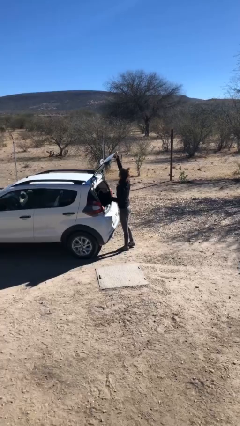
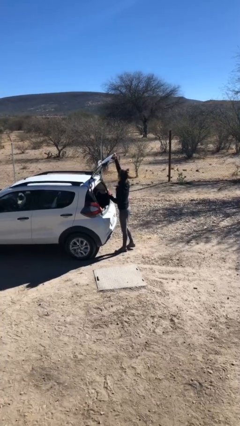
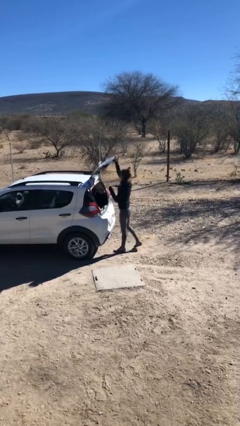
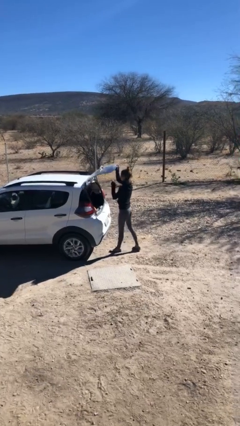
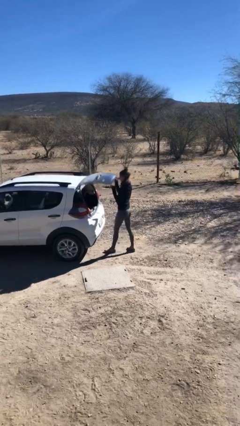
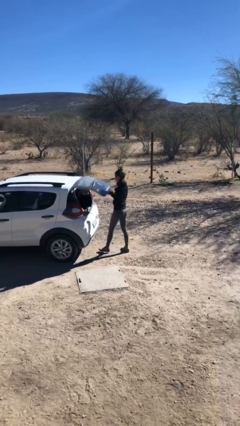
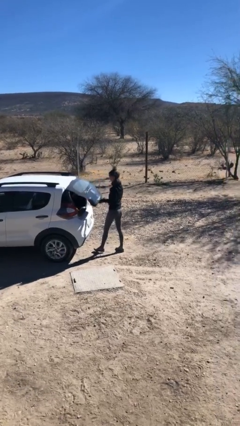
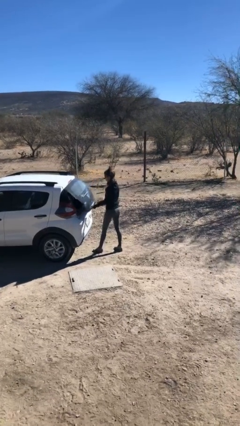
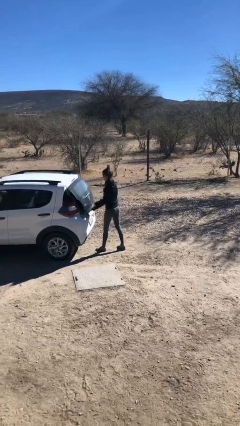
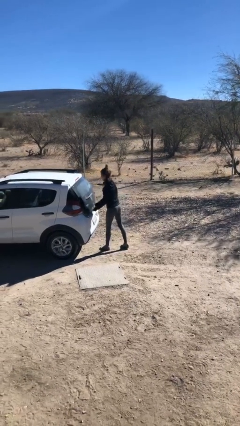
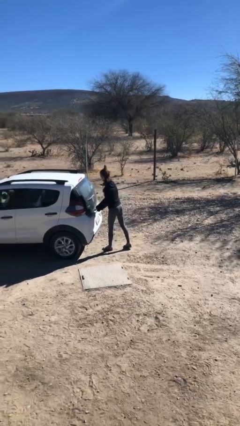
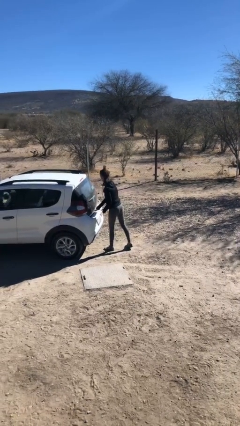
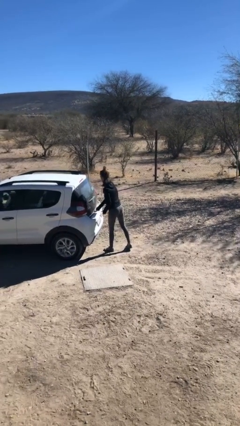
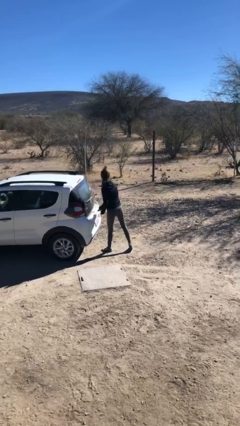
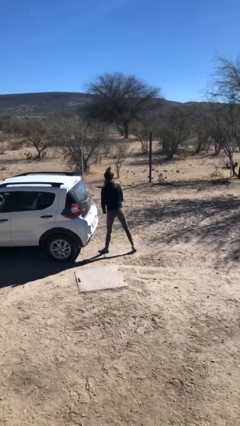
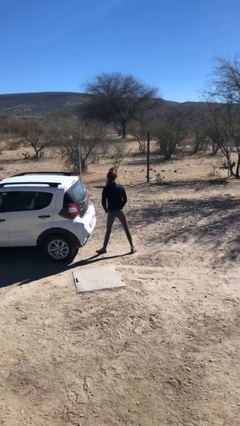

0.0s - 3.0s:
person closes car trunk

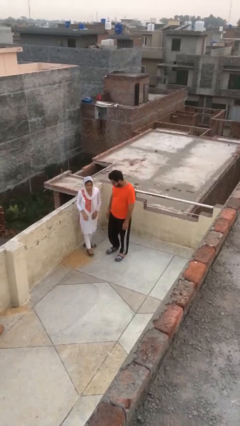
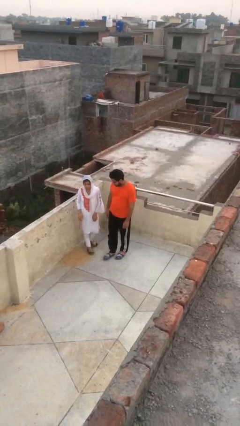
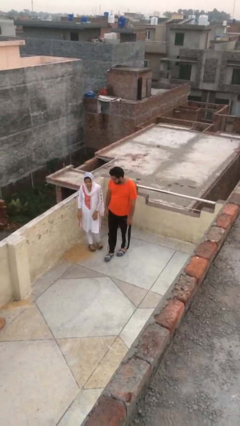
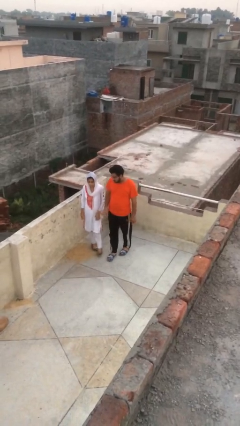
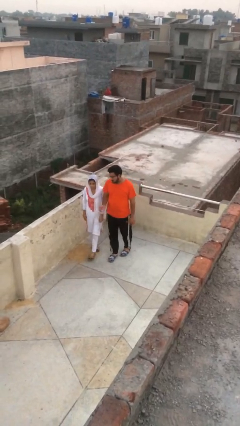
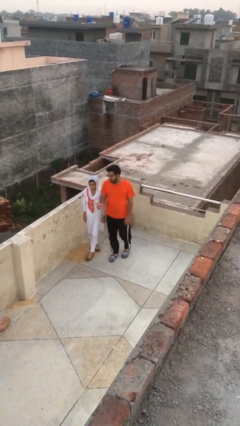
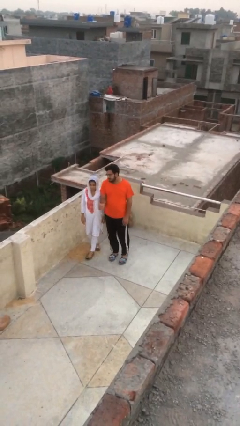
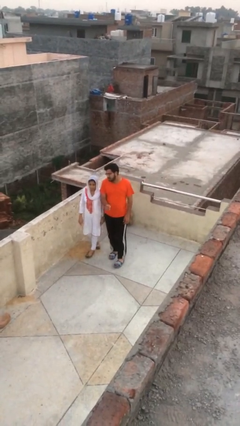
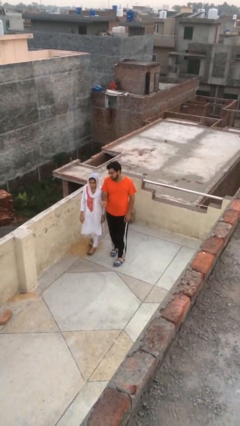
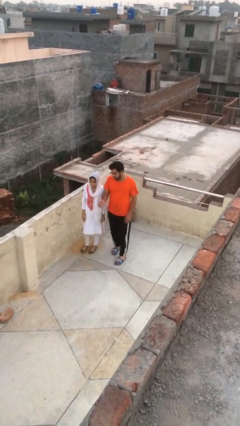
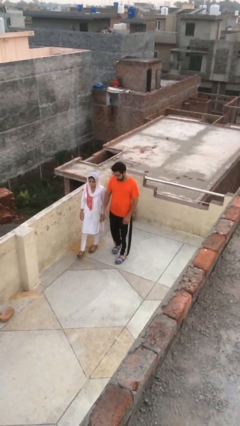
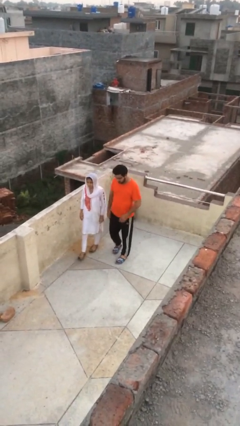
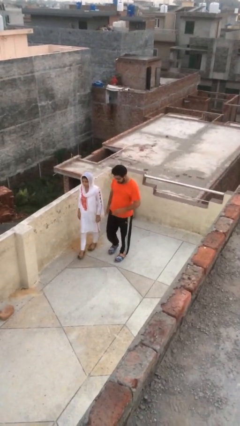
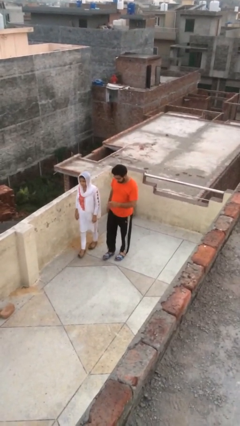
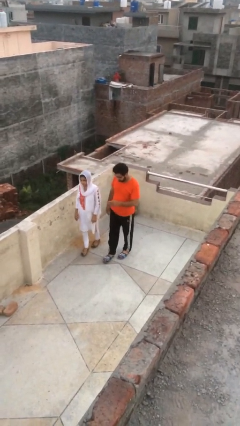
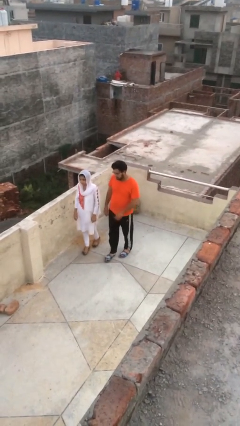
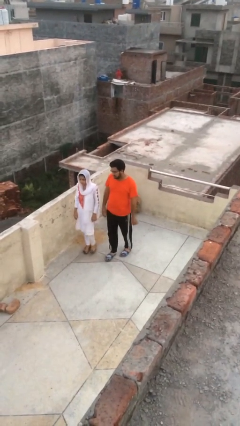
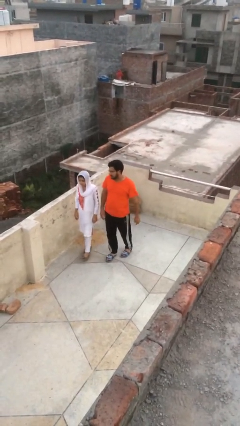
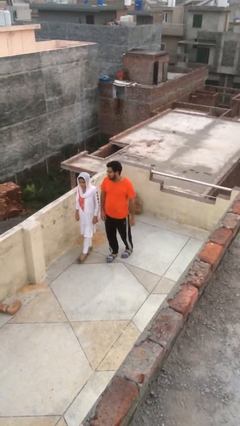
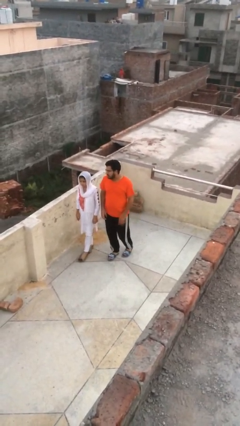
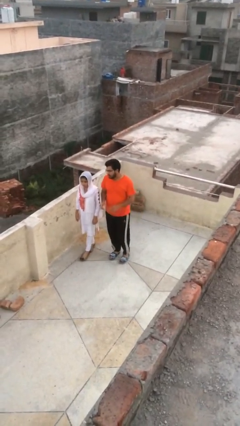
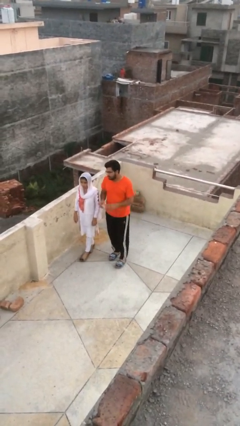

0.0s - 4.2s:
person talks to person

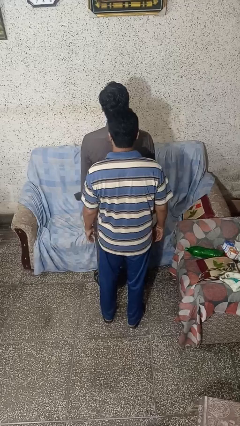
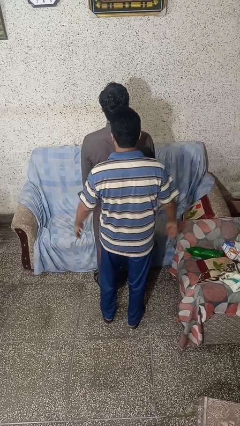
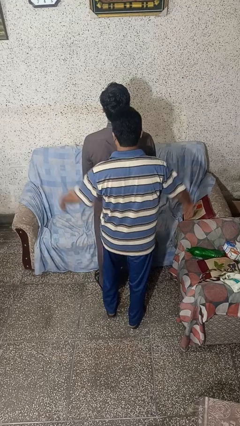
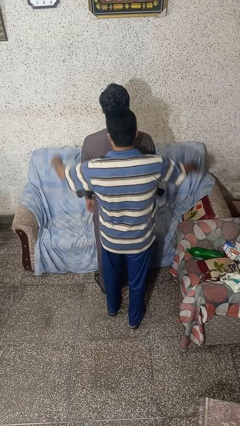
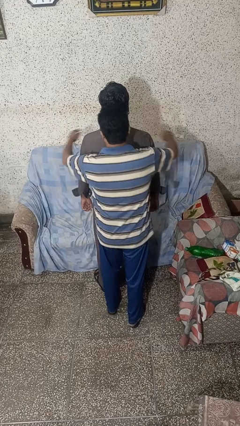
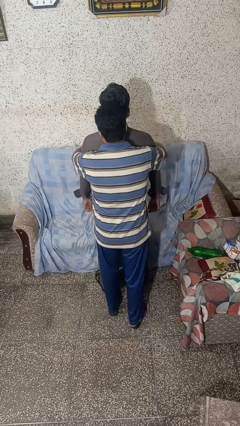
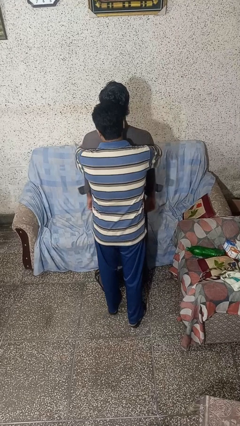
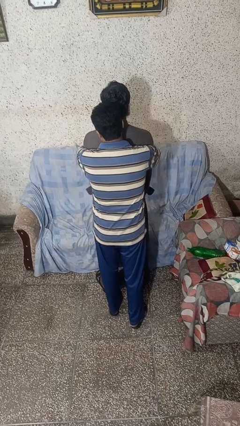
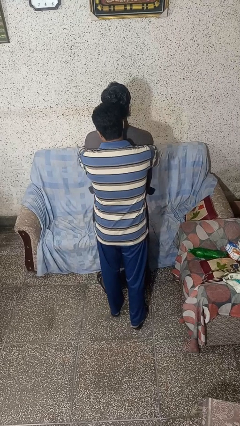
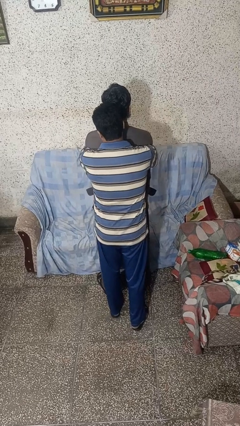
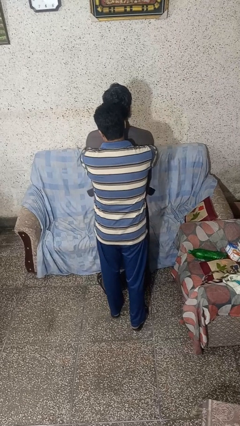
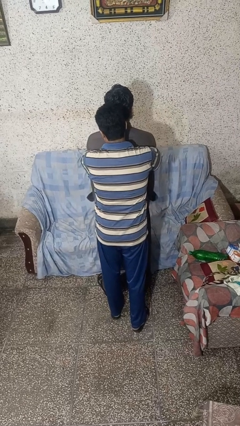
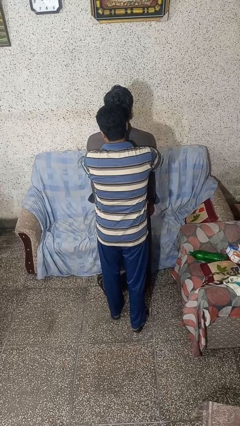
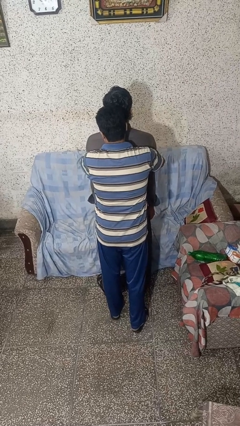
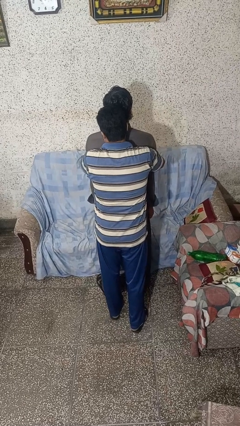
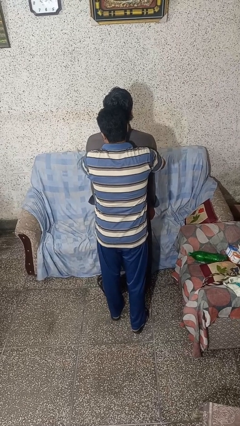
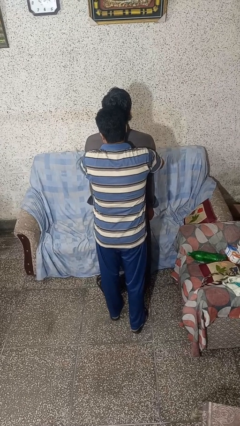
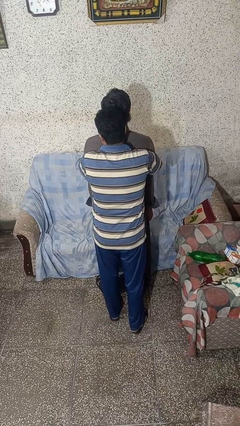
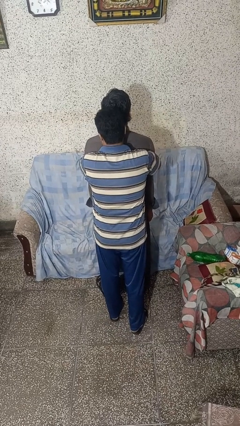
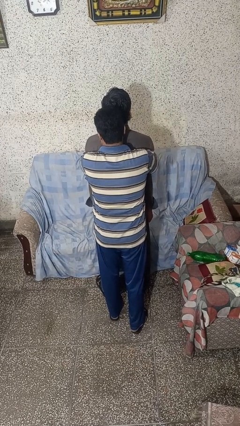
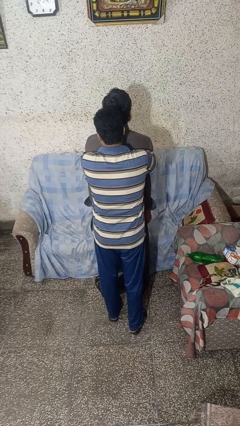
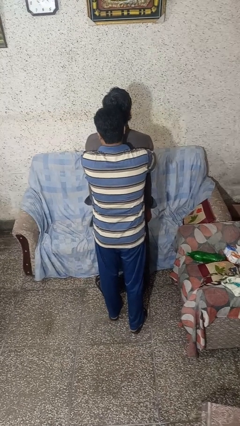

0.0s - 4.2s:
person hugs person from behind

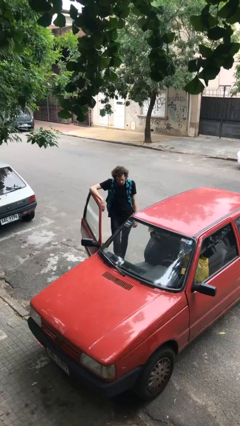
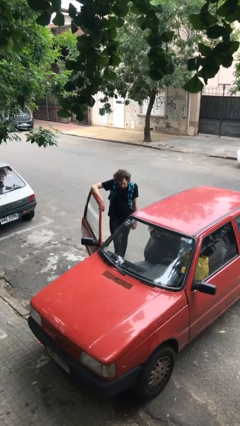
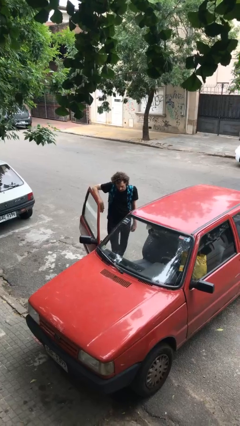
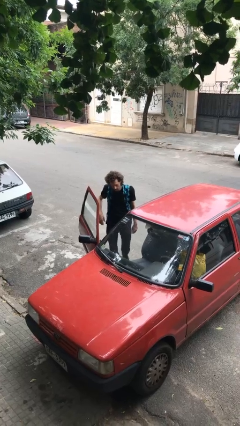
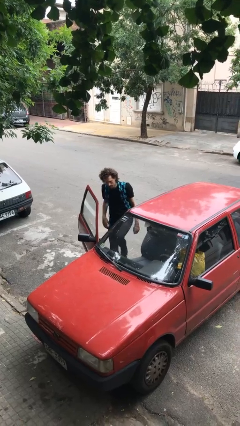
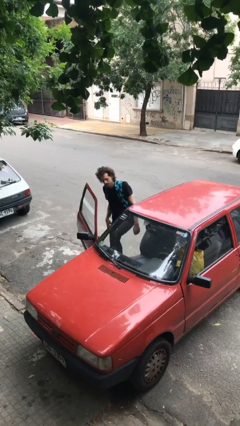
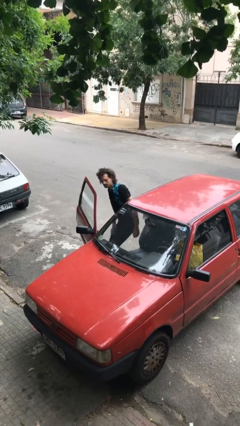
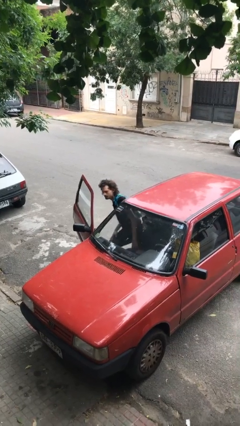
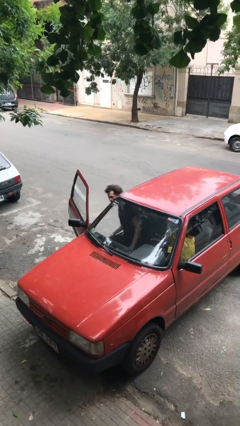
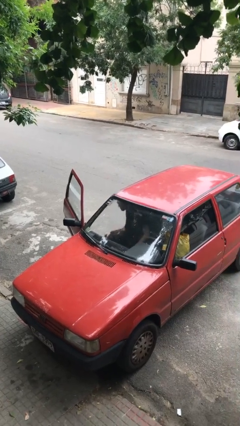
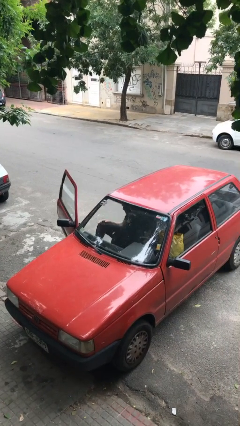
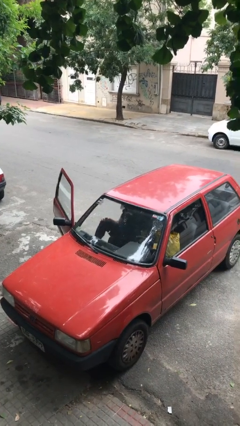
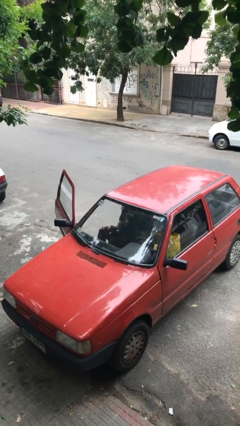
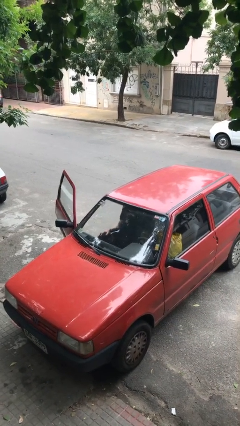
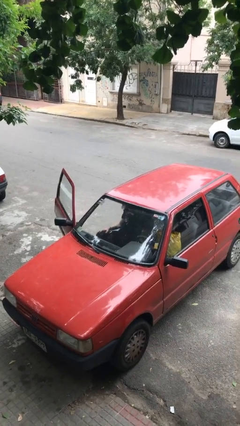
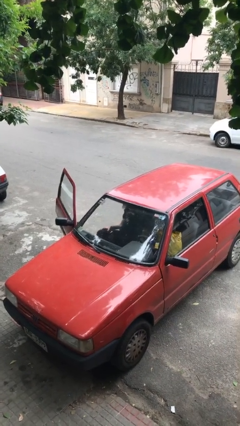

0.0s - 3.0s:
person enters car

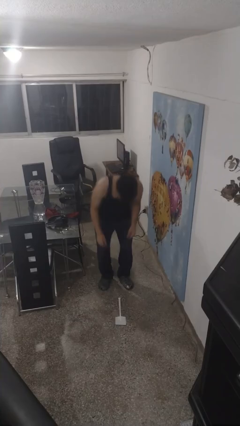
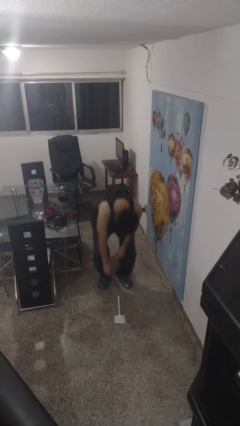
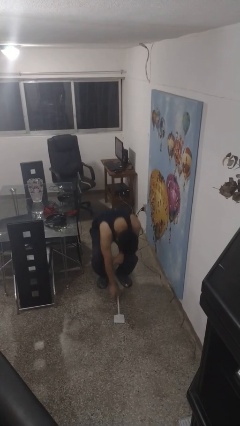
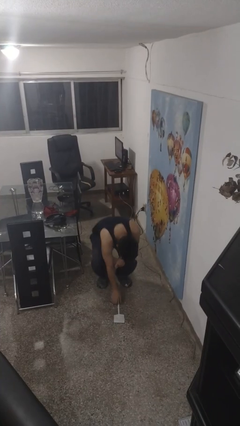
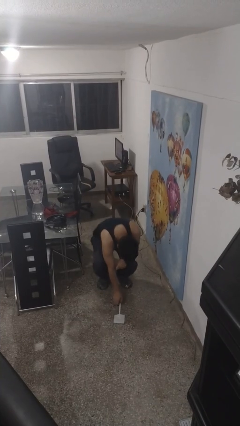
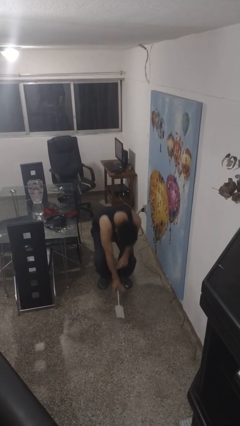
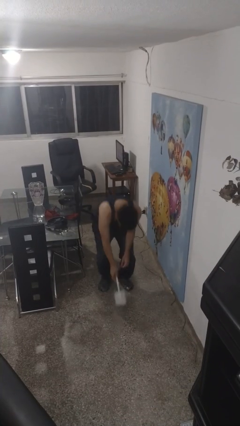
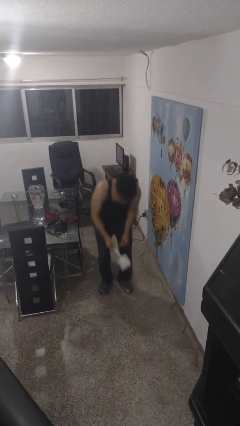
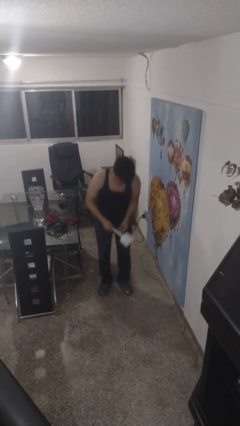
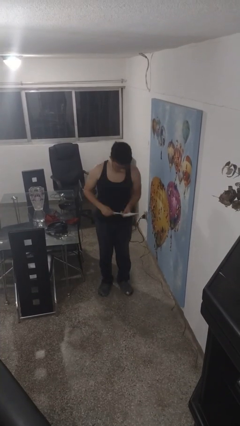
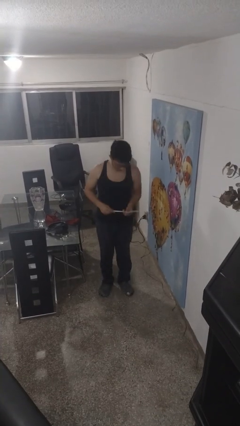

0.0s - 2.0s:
person picks up object from floor

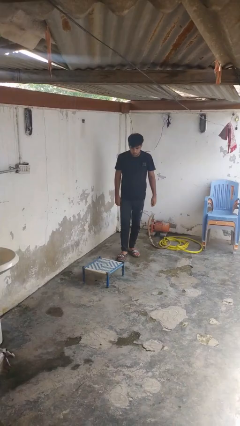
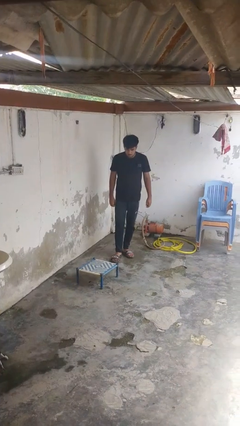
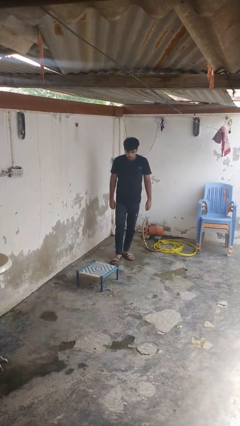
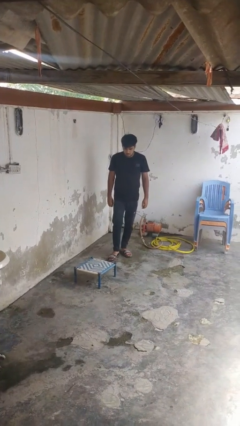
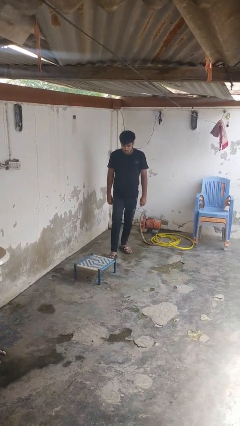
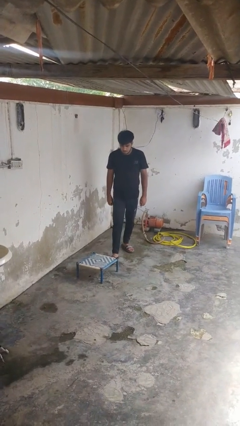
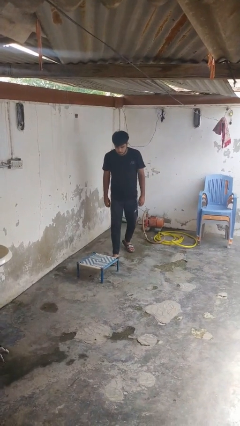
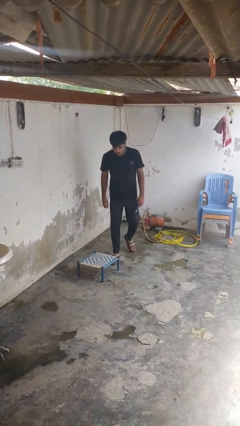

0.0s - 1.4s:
person trips on object on floor
